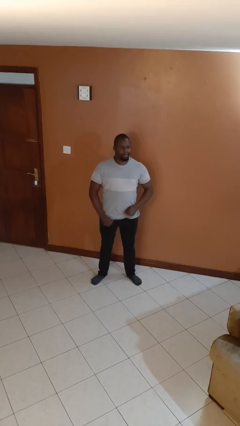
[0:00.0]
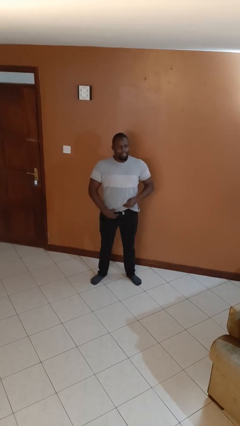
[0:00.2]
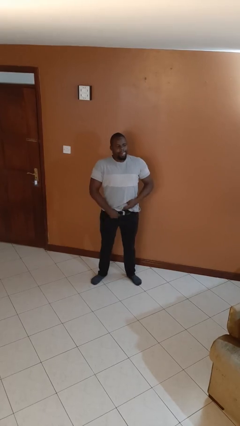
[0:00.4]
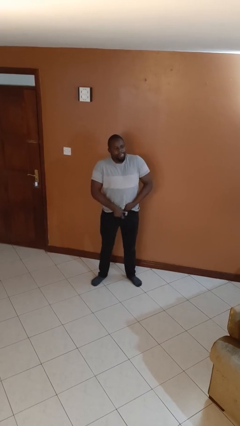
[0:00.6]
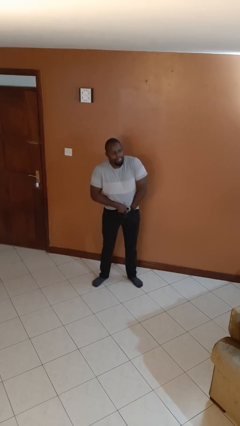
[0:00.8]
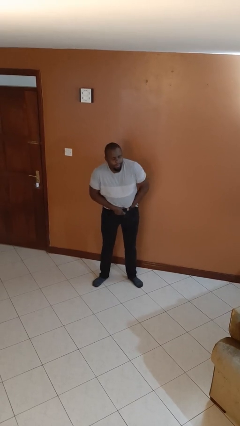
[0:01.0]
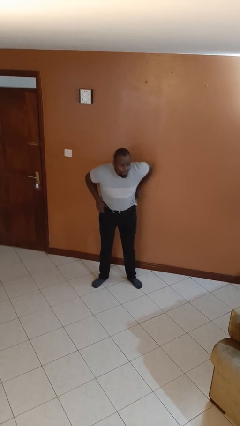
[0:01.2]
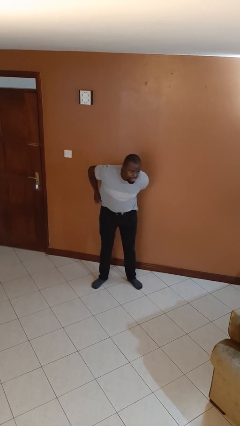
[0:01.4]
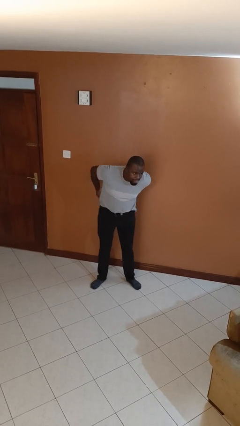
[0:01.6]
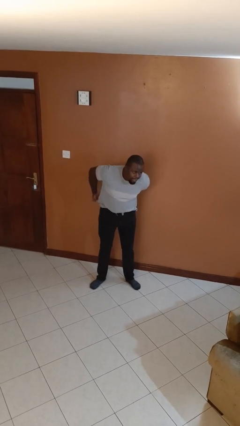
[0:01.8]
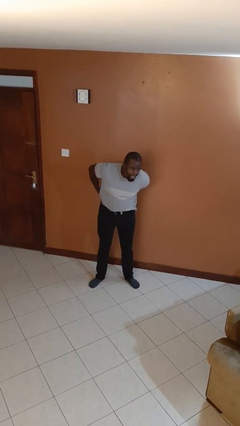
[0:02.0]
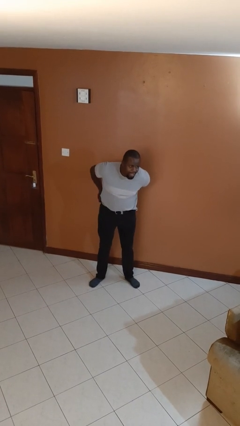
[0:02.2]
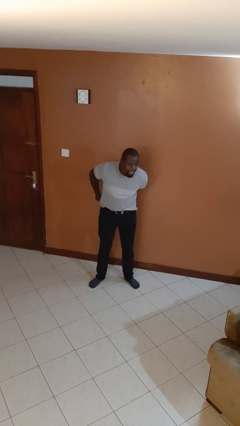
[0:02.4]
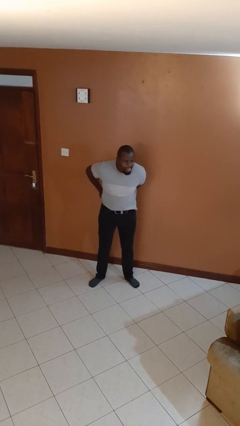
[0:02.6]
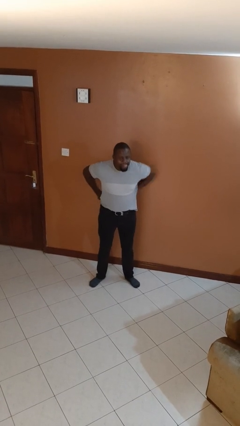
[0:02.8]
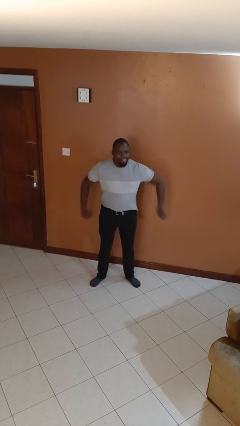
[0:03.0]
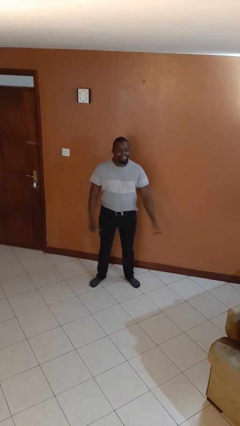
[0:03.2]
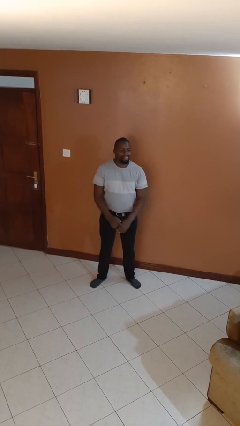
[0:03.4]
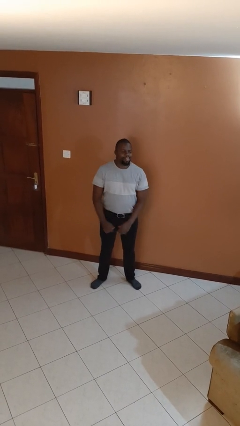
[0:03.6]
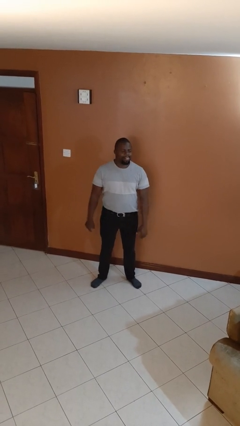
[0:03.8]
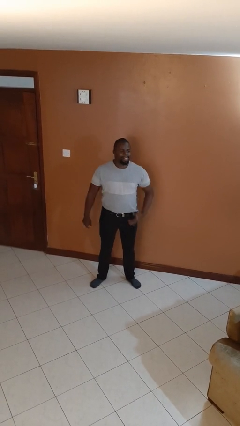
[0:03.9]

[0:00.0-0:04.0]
person tucks in shirt

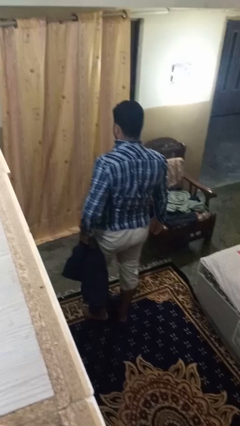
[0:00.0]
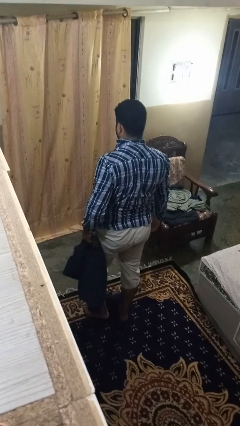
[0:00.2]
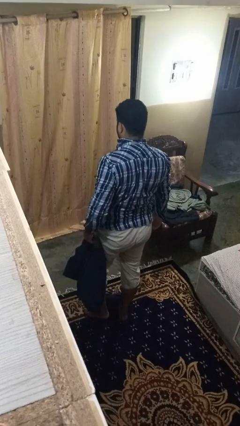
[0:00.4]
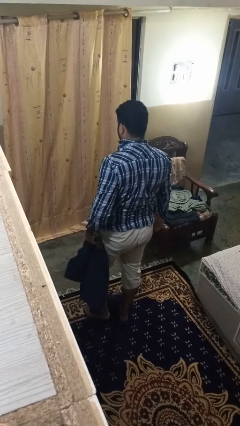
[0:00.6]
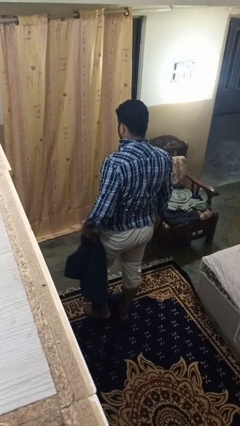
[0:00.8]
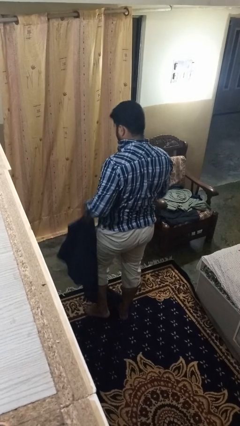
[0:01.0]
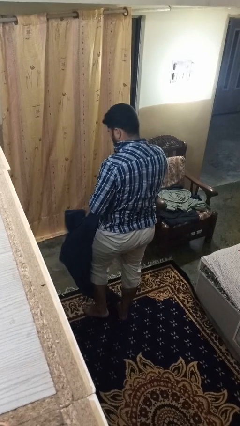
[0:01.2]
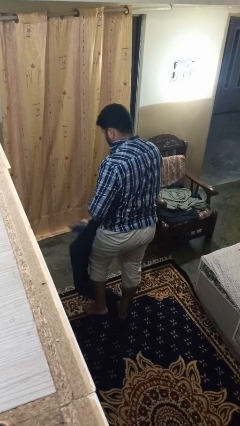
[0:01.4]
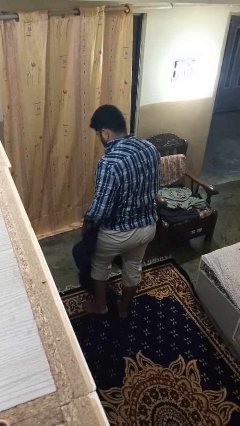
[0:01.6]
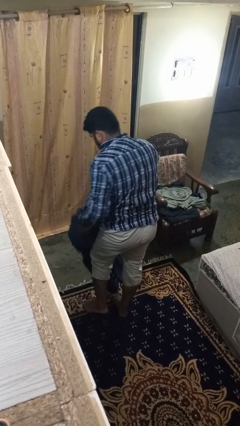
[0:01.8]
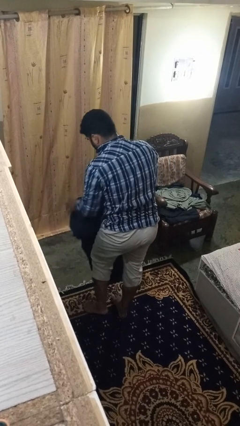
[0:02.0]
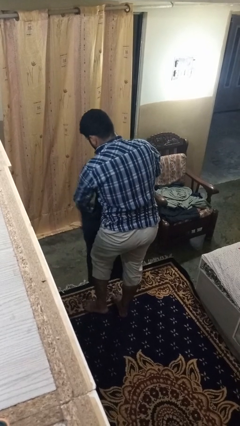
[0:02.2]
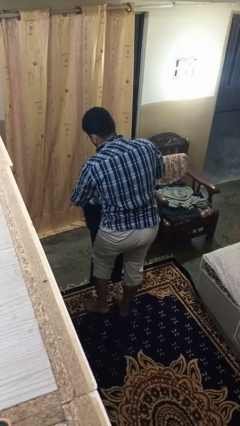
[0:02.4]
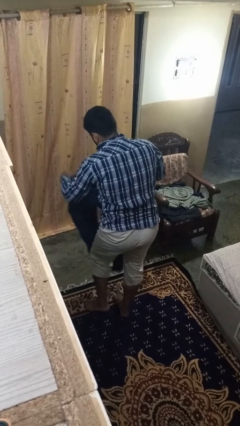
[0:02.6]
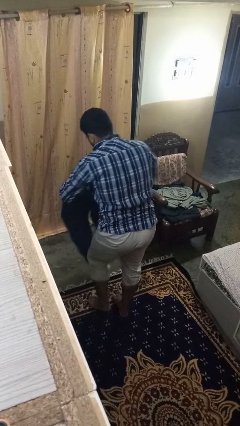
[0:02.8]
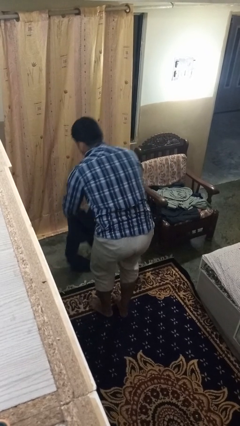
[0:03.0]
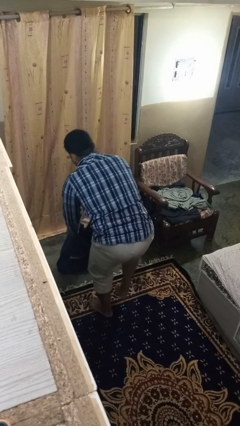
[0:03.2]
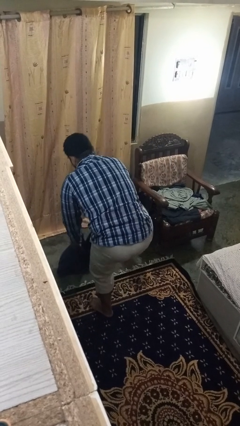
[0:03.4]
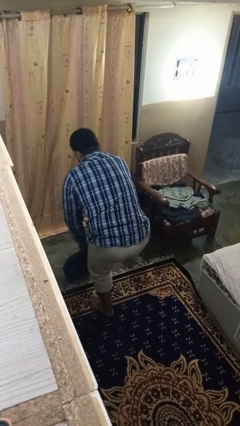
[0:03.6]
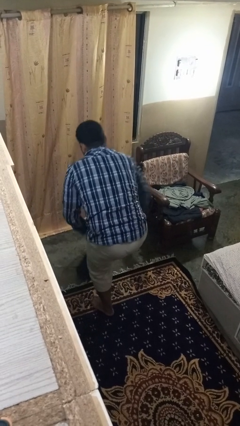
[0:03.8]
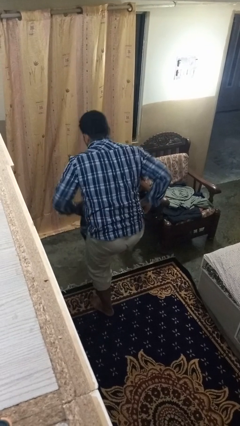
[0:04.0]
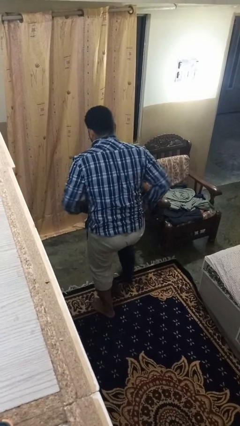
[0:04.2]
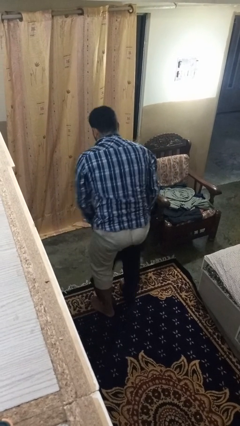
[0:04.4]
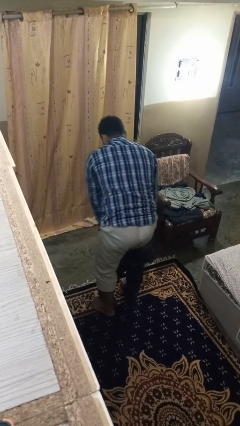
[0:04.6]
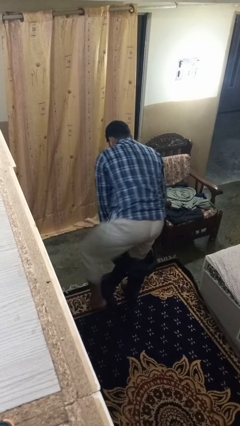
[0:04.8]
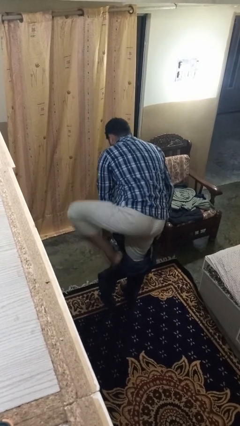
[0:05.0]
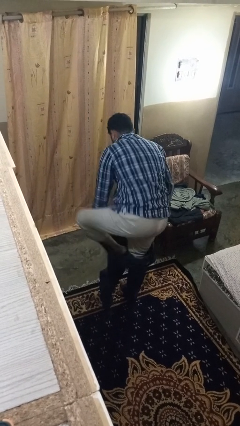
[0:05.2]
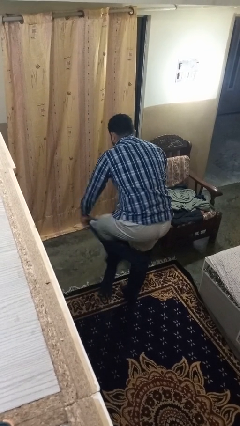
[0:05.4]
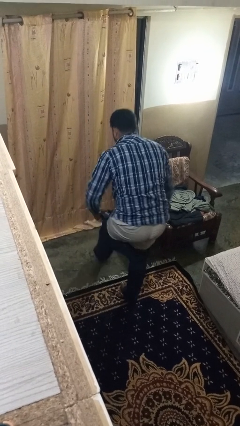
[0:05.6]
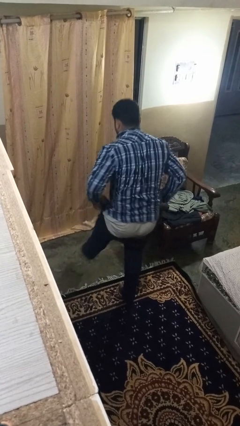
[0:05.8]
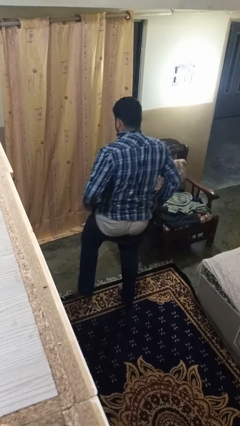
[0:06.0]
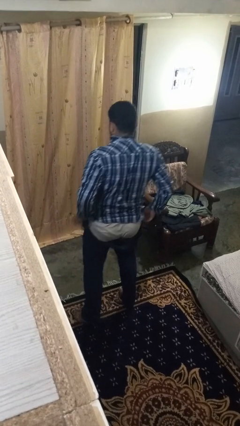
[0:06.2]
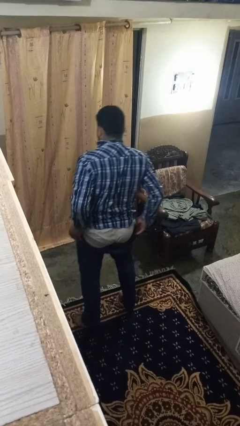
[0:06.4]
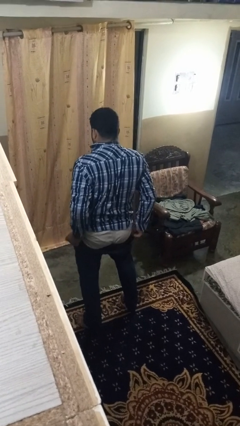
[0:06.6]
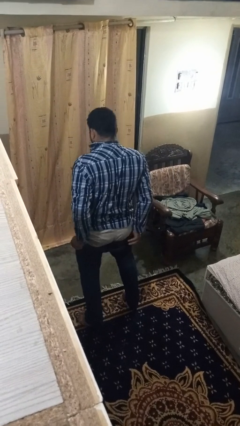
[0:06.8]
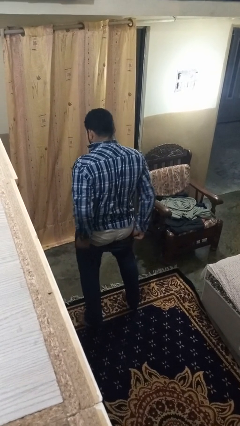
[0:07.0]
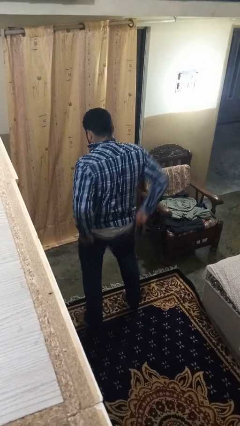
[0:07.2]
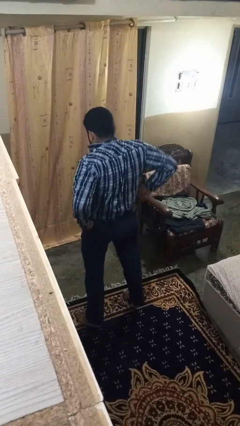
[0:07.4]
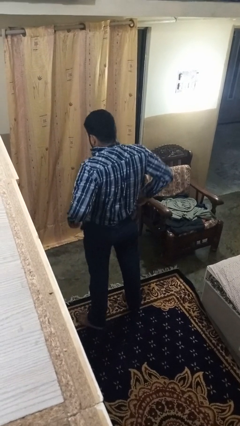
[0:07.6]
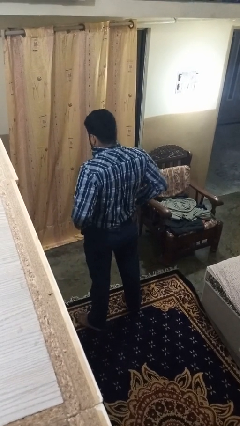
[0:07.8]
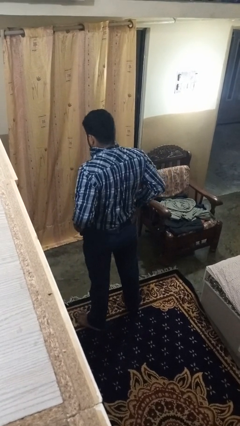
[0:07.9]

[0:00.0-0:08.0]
person puts on pants

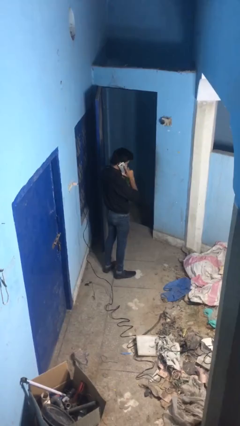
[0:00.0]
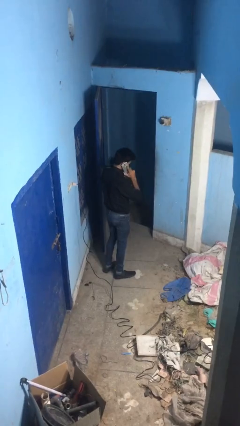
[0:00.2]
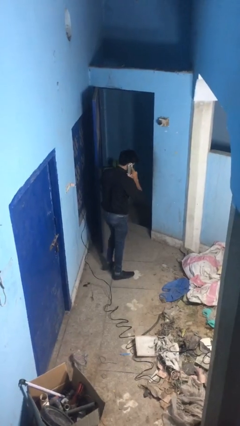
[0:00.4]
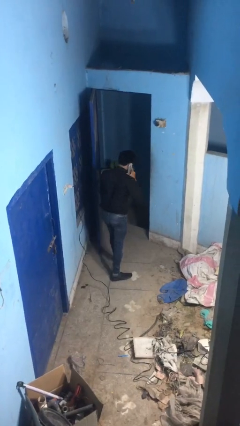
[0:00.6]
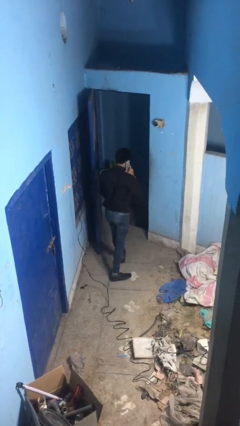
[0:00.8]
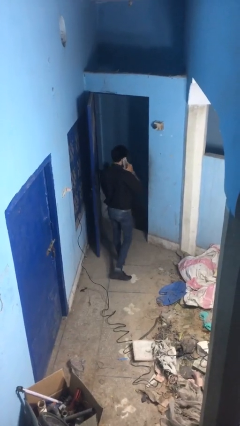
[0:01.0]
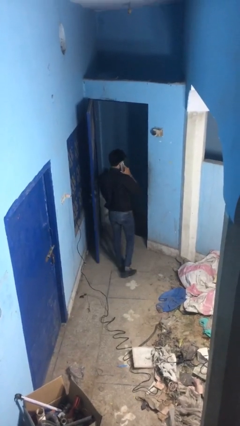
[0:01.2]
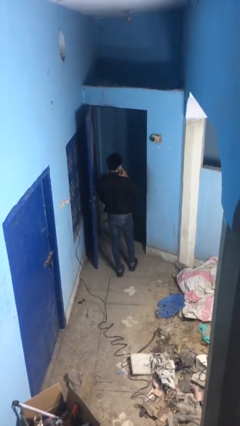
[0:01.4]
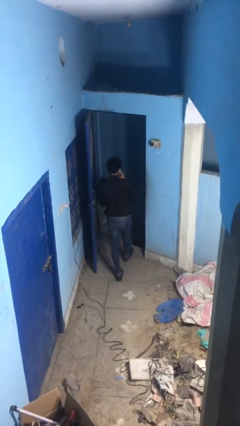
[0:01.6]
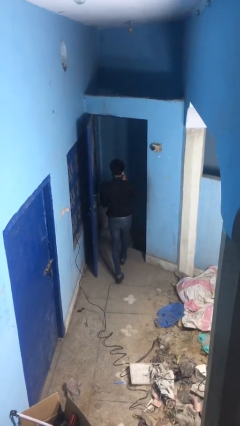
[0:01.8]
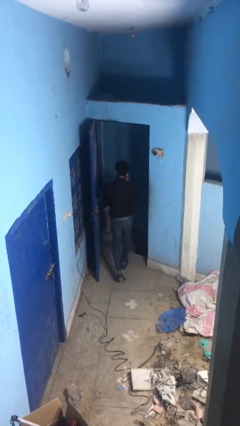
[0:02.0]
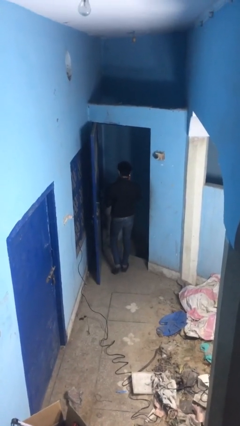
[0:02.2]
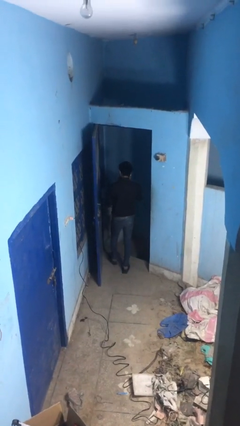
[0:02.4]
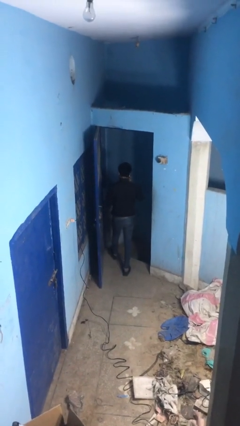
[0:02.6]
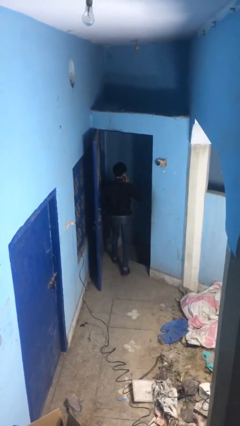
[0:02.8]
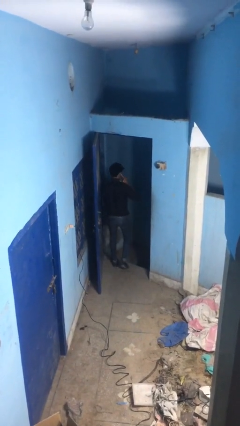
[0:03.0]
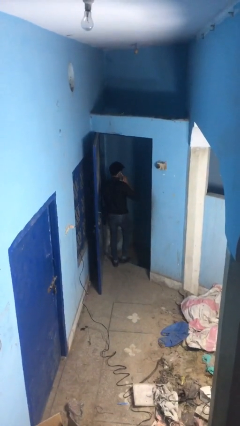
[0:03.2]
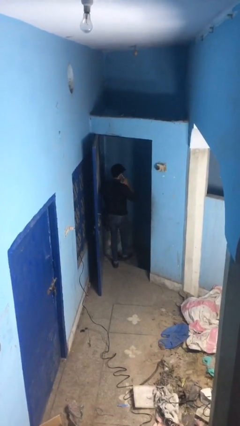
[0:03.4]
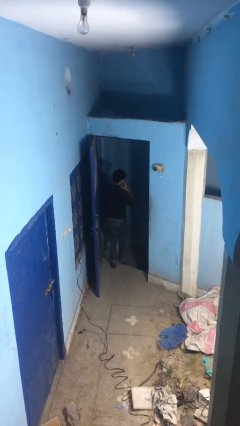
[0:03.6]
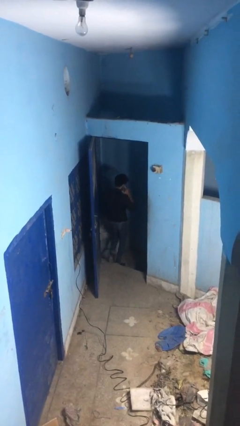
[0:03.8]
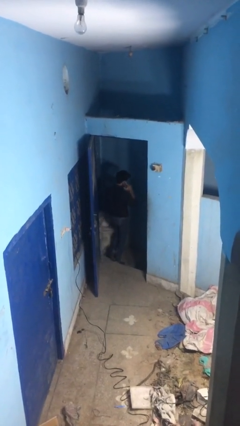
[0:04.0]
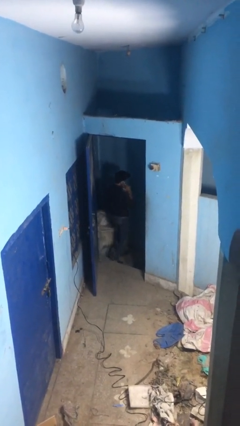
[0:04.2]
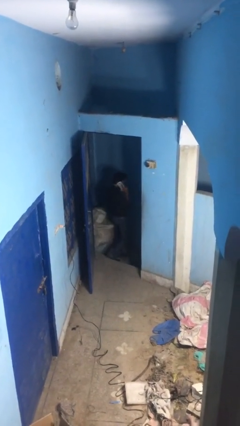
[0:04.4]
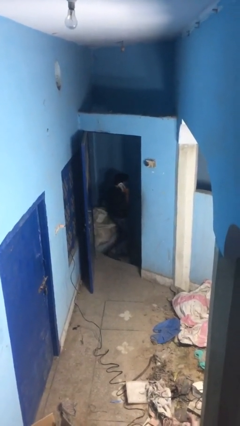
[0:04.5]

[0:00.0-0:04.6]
person exits scene through structure

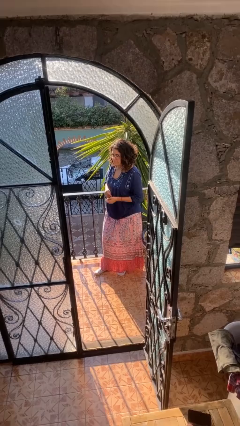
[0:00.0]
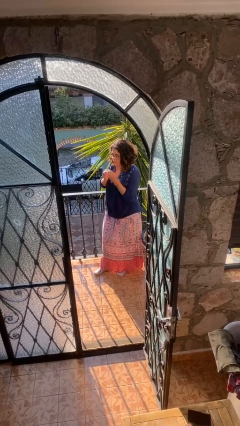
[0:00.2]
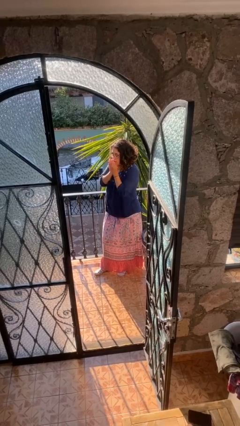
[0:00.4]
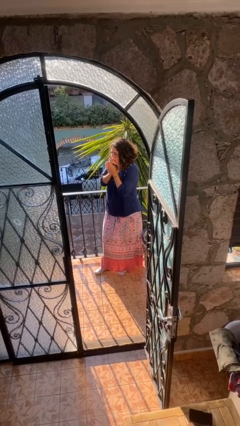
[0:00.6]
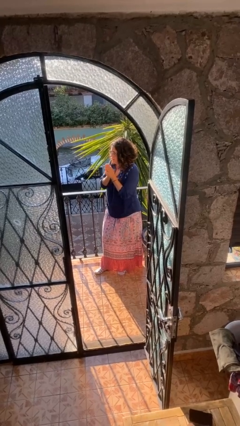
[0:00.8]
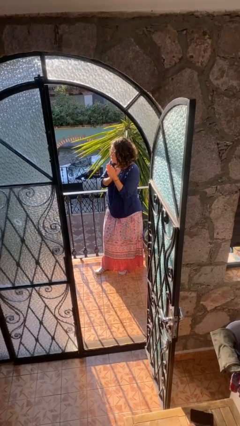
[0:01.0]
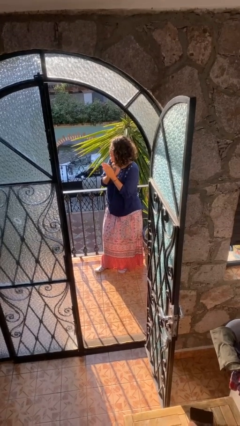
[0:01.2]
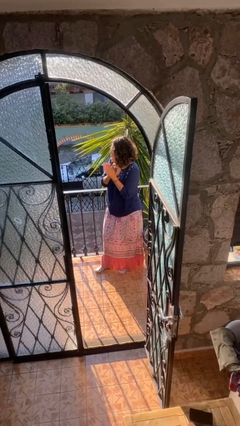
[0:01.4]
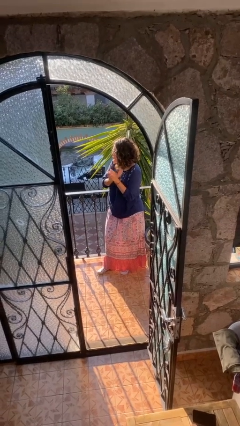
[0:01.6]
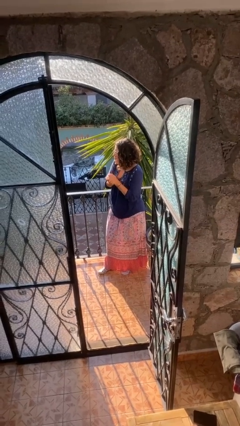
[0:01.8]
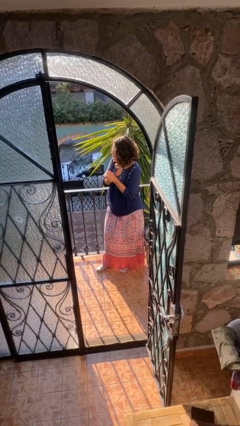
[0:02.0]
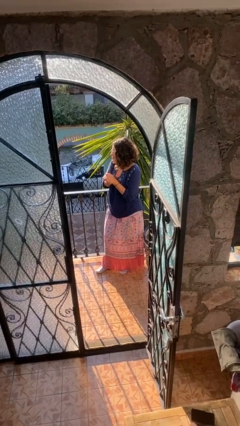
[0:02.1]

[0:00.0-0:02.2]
person blows into hands
